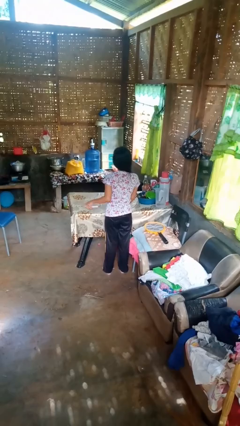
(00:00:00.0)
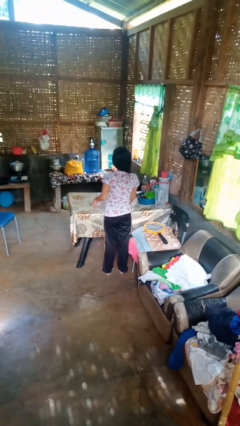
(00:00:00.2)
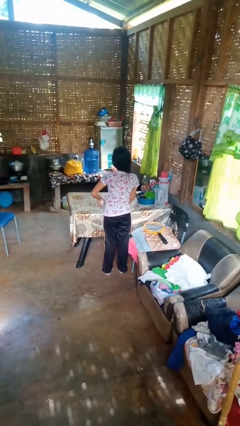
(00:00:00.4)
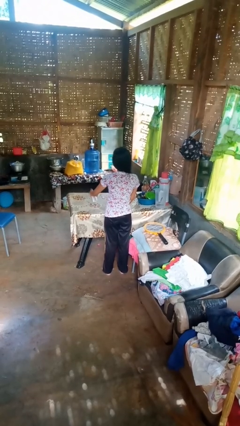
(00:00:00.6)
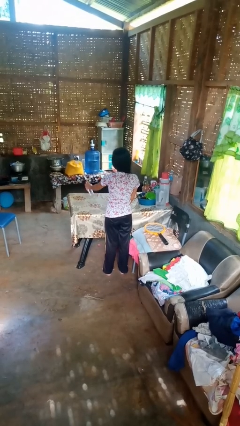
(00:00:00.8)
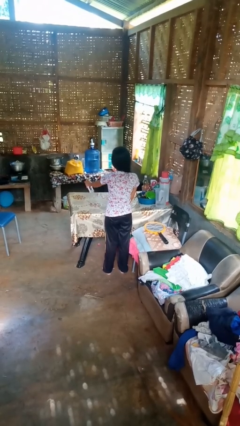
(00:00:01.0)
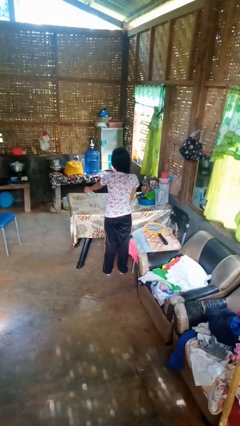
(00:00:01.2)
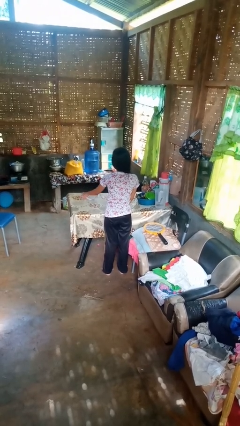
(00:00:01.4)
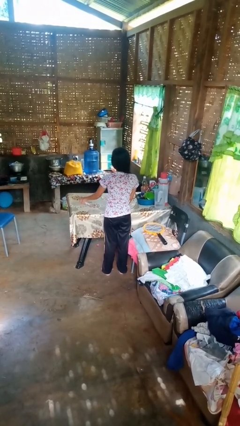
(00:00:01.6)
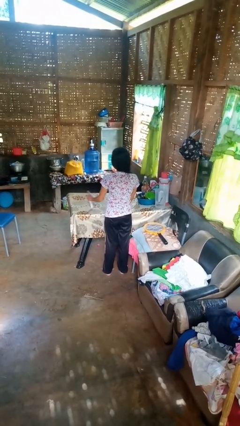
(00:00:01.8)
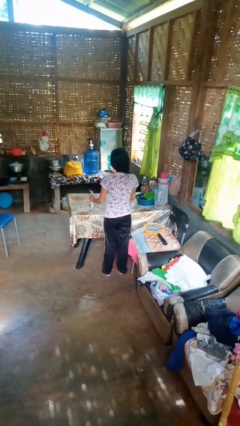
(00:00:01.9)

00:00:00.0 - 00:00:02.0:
person sprays from bottle

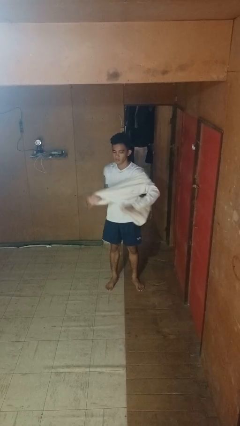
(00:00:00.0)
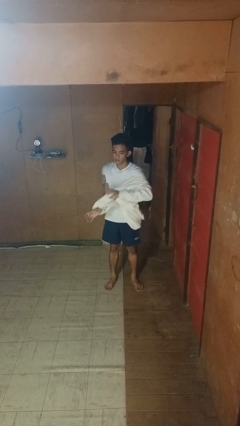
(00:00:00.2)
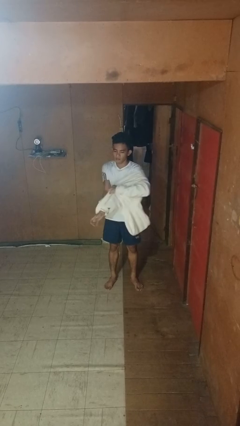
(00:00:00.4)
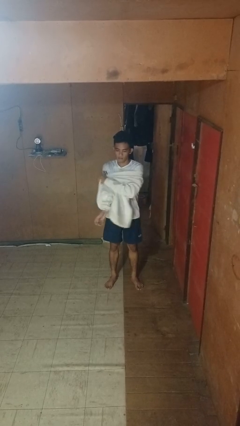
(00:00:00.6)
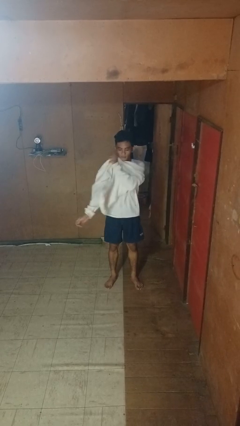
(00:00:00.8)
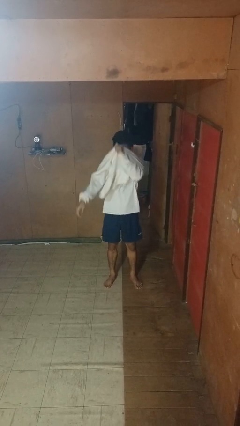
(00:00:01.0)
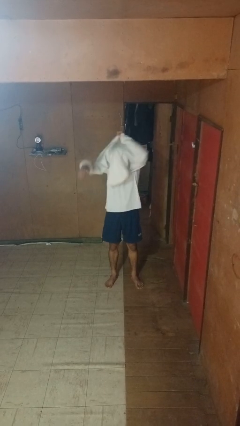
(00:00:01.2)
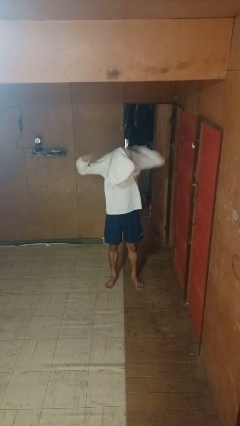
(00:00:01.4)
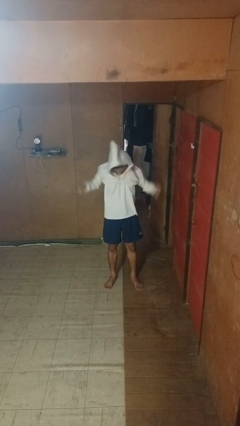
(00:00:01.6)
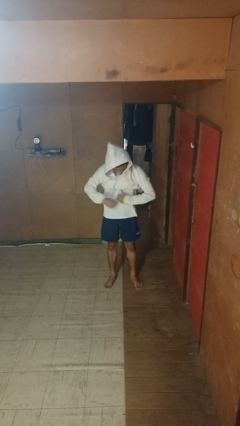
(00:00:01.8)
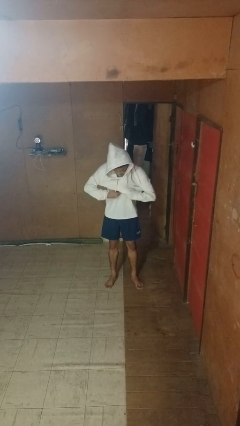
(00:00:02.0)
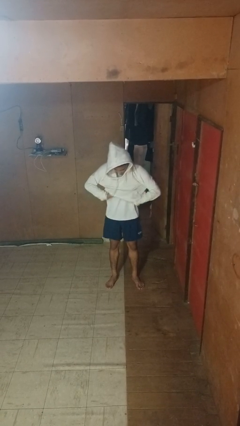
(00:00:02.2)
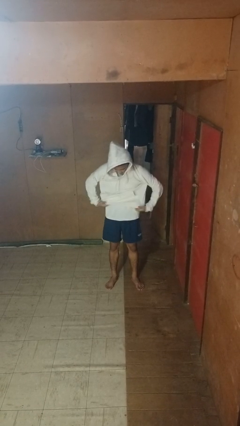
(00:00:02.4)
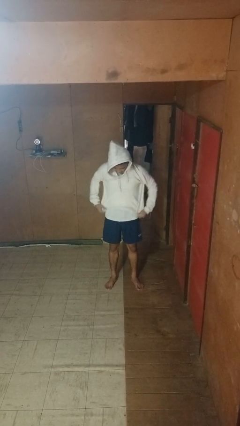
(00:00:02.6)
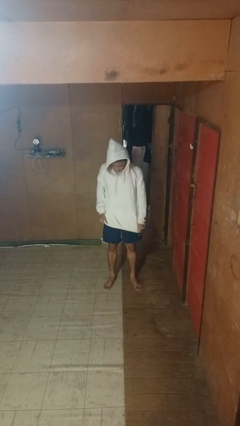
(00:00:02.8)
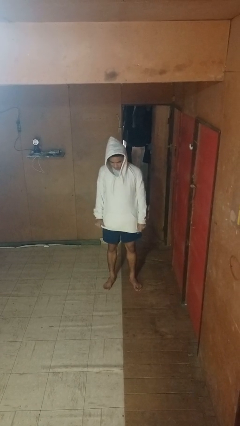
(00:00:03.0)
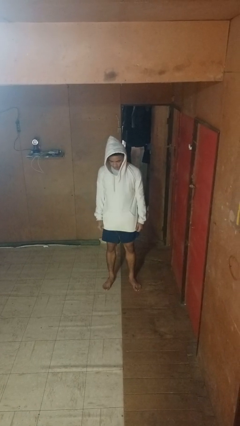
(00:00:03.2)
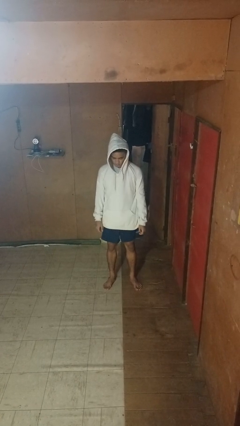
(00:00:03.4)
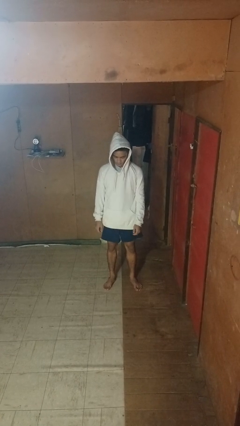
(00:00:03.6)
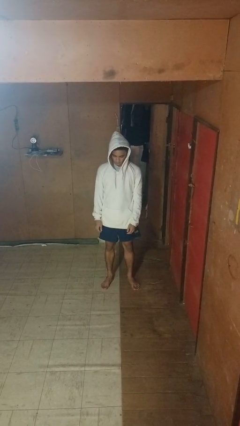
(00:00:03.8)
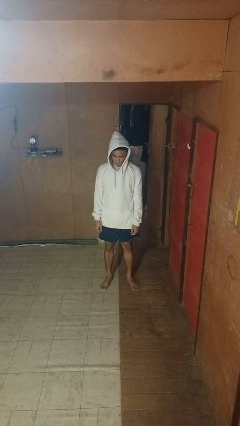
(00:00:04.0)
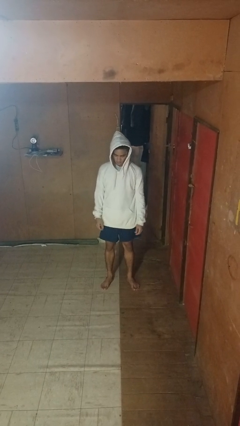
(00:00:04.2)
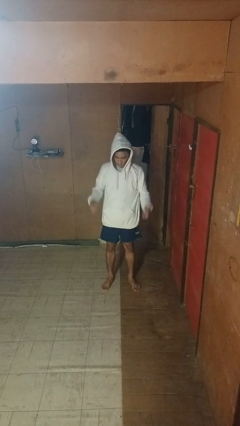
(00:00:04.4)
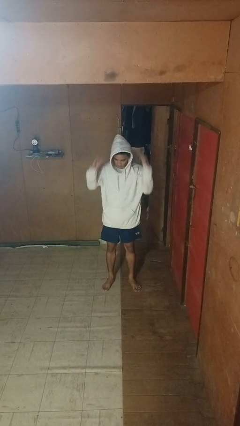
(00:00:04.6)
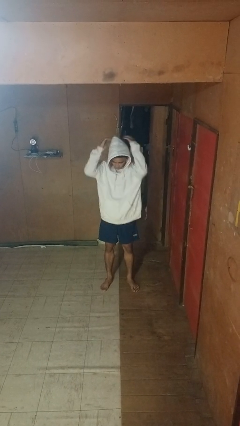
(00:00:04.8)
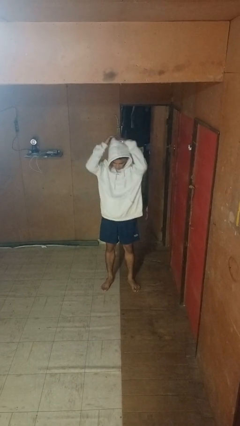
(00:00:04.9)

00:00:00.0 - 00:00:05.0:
person puts on hoodie

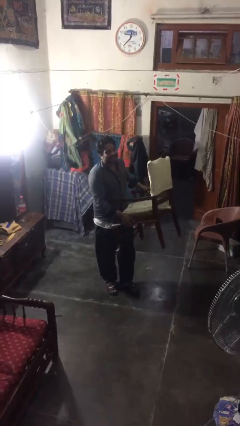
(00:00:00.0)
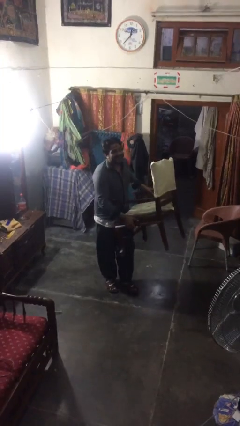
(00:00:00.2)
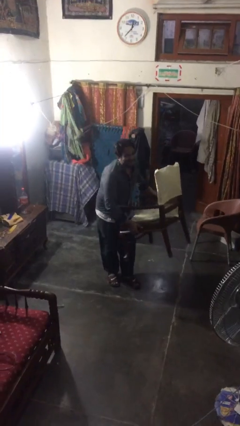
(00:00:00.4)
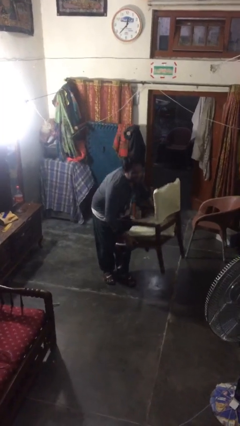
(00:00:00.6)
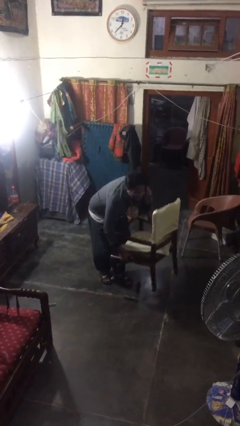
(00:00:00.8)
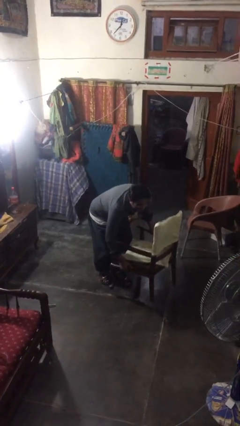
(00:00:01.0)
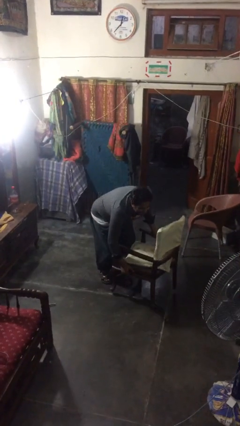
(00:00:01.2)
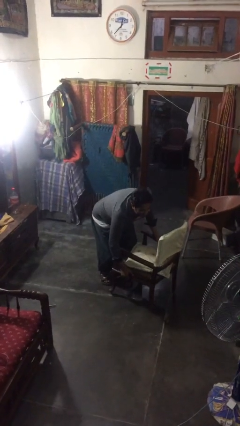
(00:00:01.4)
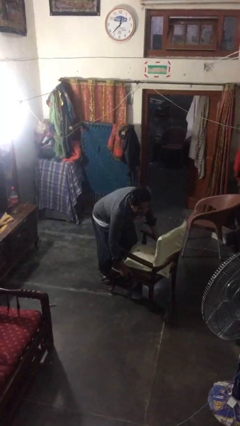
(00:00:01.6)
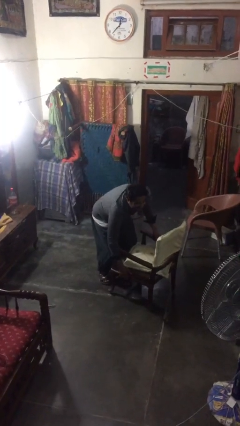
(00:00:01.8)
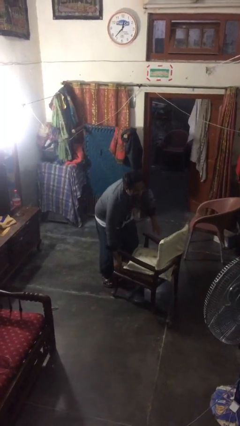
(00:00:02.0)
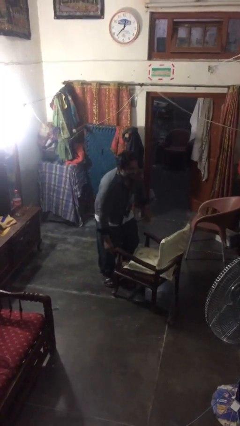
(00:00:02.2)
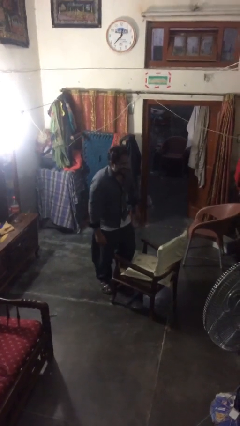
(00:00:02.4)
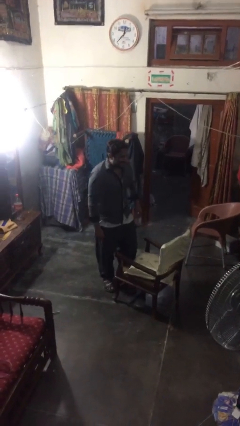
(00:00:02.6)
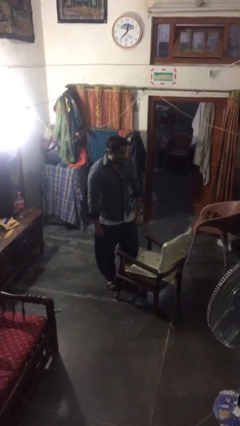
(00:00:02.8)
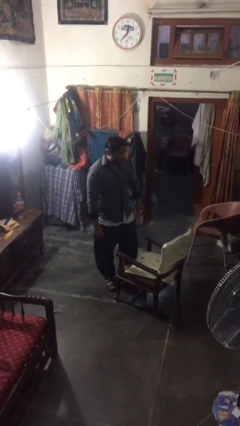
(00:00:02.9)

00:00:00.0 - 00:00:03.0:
person puts down object on floor

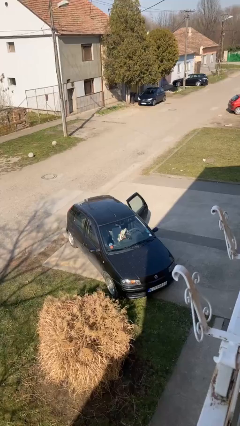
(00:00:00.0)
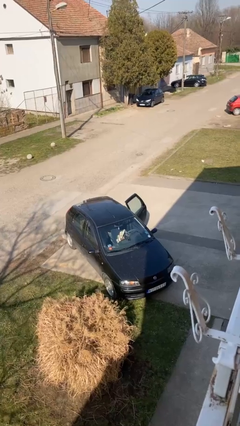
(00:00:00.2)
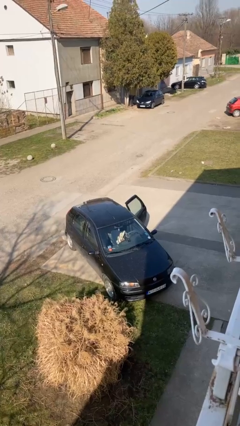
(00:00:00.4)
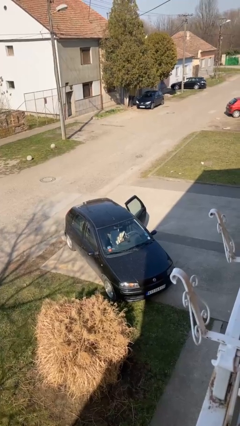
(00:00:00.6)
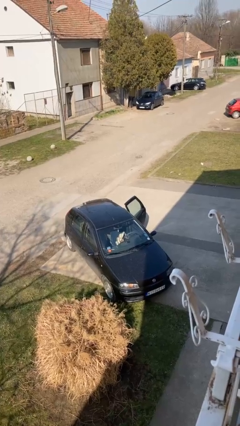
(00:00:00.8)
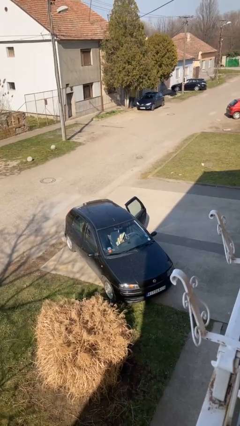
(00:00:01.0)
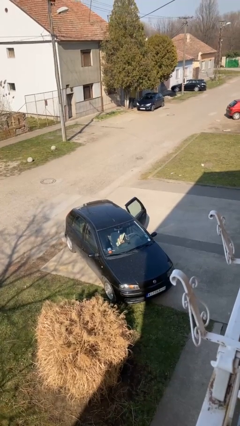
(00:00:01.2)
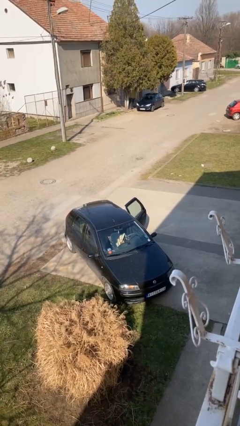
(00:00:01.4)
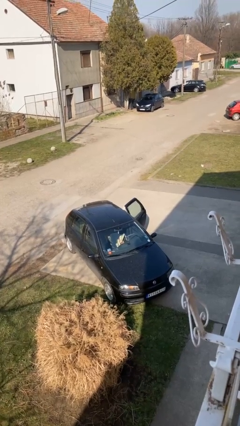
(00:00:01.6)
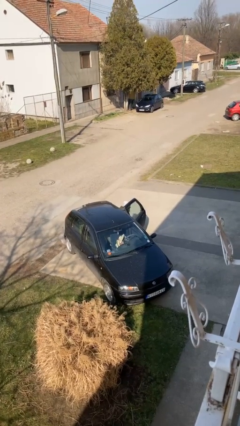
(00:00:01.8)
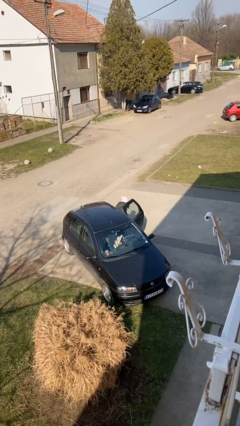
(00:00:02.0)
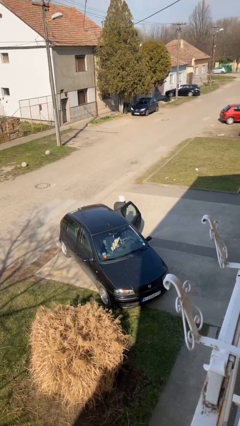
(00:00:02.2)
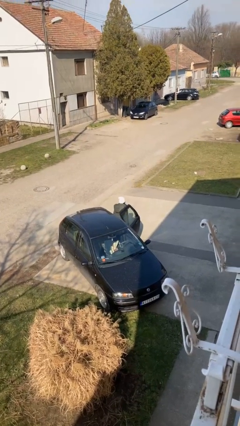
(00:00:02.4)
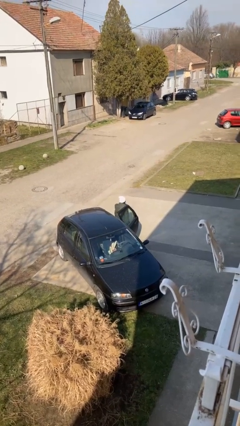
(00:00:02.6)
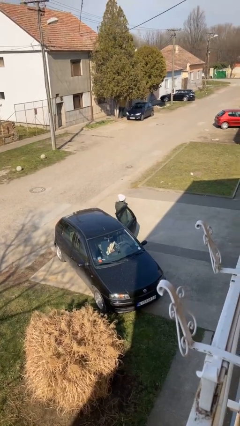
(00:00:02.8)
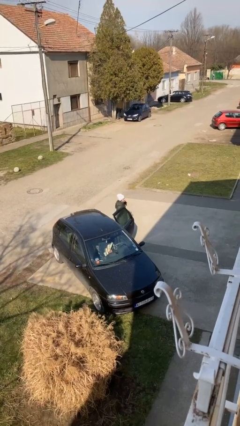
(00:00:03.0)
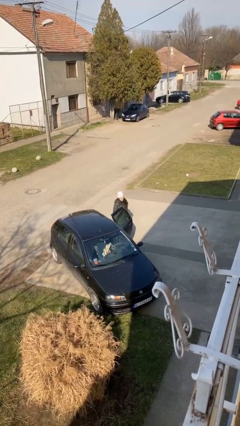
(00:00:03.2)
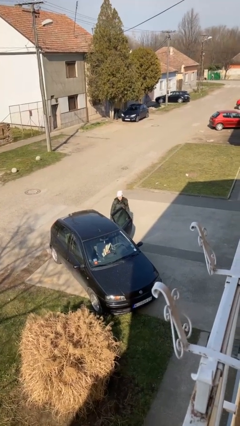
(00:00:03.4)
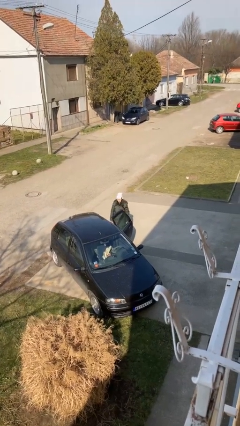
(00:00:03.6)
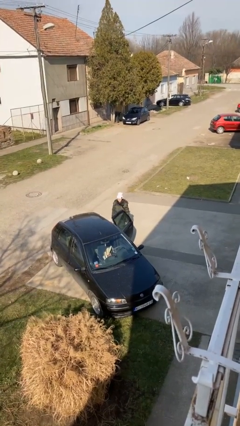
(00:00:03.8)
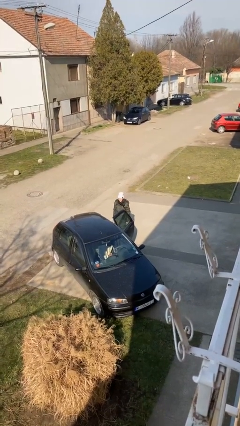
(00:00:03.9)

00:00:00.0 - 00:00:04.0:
person exits car

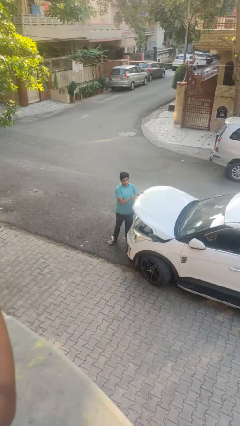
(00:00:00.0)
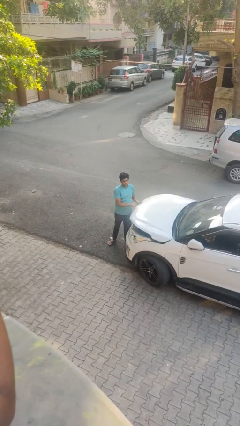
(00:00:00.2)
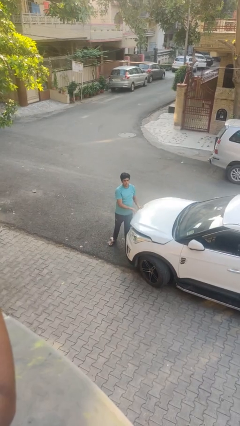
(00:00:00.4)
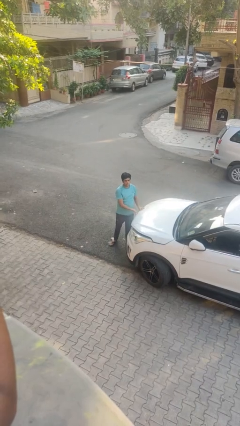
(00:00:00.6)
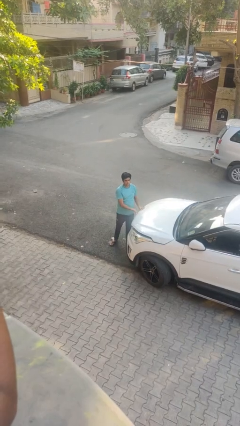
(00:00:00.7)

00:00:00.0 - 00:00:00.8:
person closes car hood

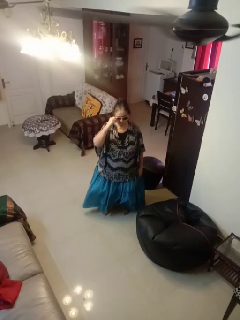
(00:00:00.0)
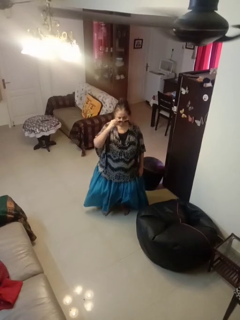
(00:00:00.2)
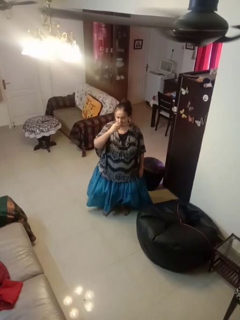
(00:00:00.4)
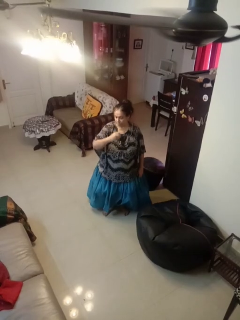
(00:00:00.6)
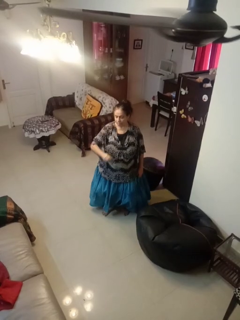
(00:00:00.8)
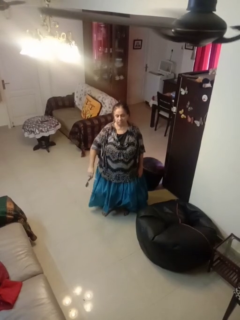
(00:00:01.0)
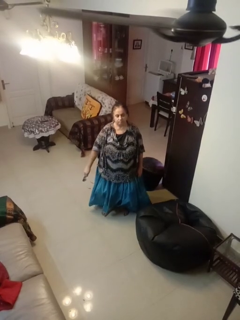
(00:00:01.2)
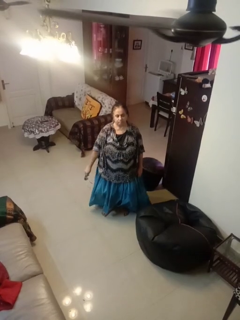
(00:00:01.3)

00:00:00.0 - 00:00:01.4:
person takes off sunglasses

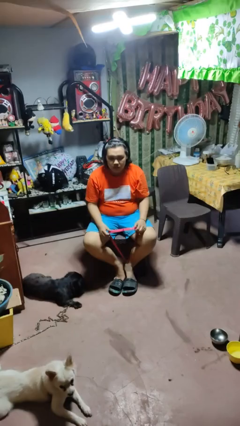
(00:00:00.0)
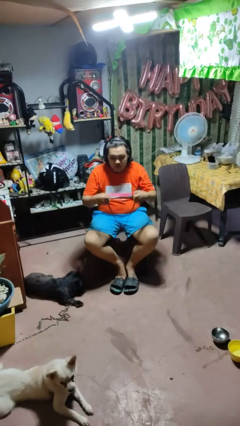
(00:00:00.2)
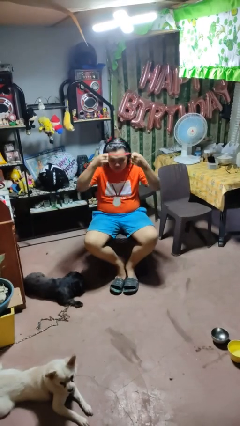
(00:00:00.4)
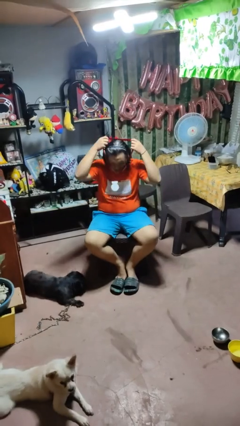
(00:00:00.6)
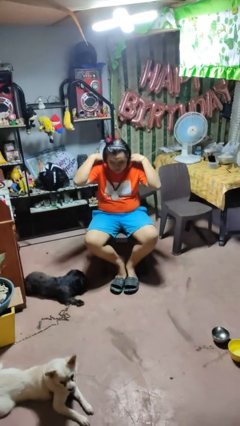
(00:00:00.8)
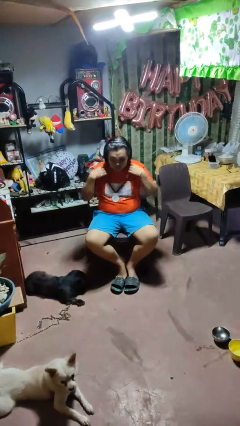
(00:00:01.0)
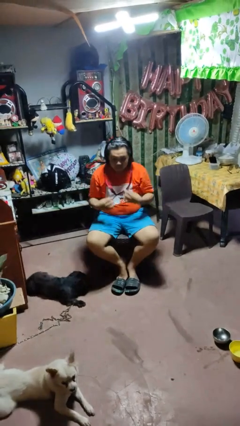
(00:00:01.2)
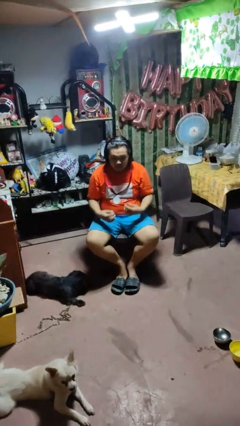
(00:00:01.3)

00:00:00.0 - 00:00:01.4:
person puts on necklace
